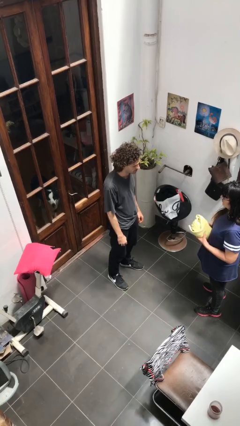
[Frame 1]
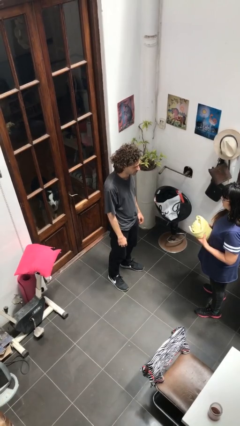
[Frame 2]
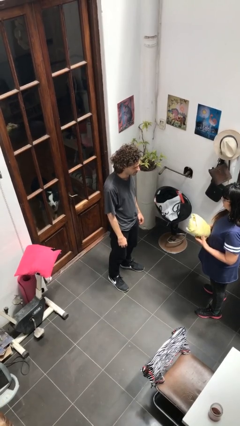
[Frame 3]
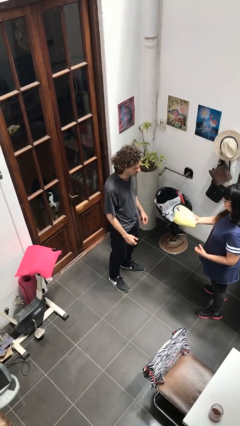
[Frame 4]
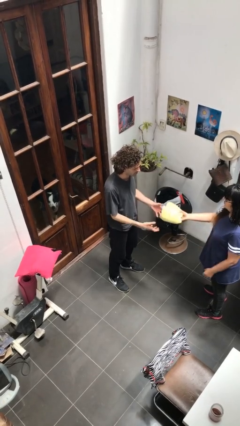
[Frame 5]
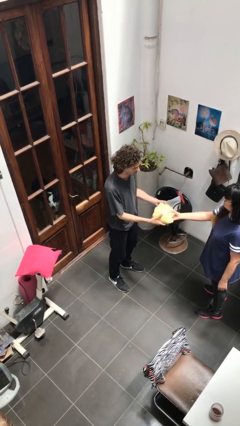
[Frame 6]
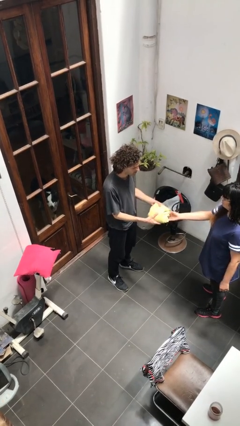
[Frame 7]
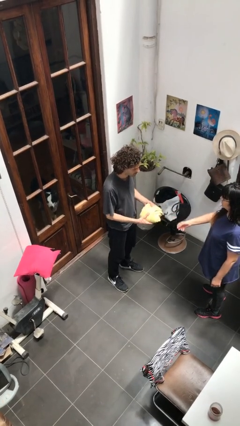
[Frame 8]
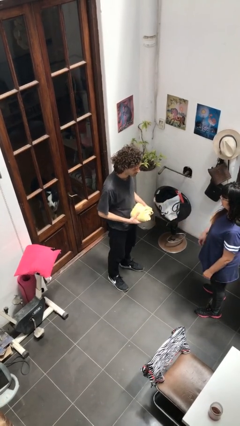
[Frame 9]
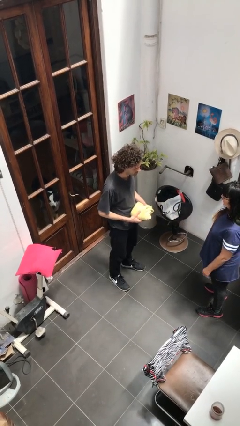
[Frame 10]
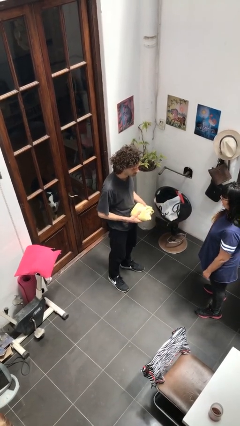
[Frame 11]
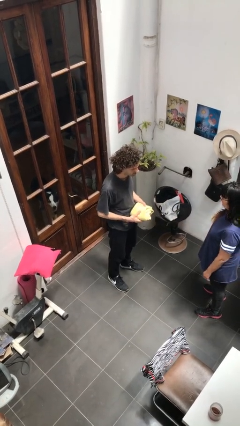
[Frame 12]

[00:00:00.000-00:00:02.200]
person transfers object to person

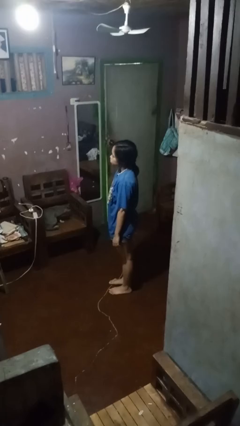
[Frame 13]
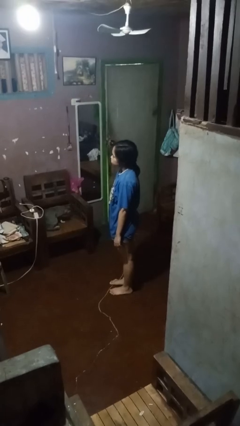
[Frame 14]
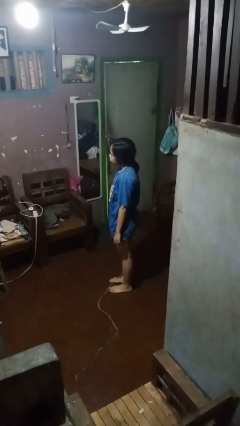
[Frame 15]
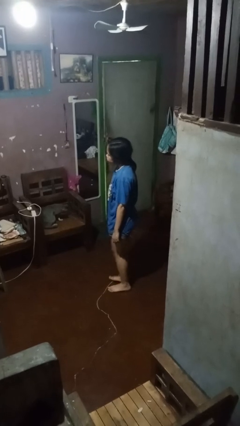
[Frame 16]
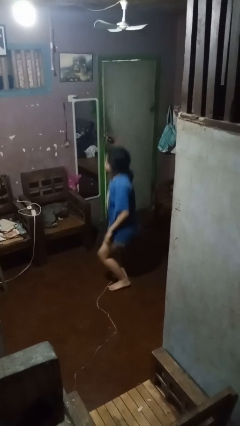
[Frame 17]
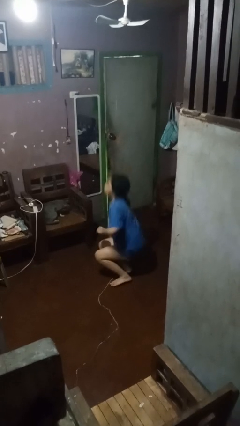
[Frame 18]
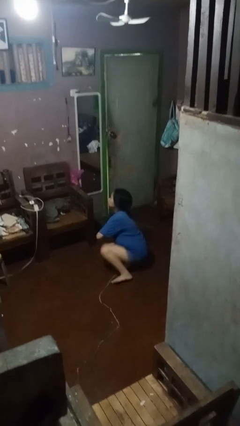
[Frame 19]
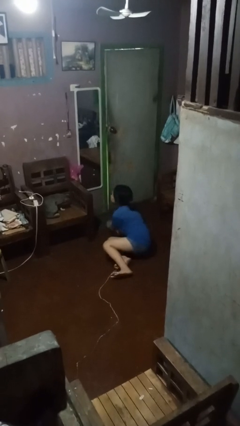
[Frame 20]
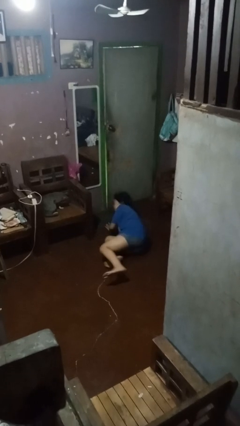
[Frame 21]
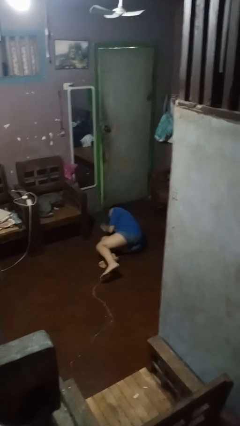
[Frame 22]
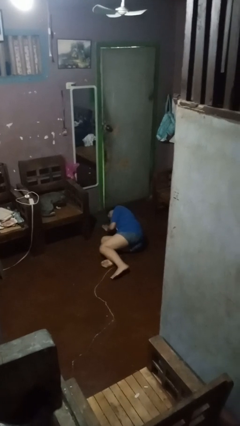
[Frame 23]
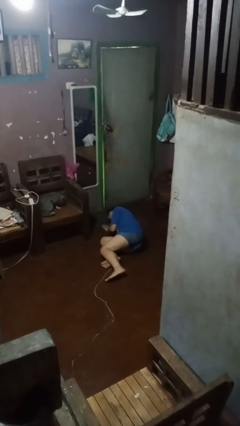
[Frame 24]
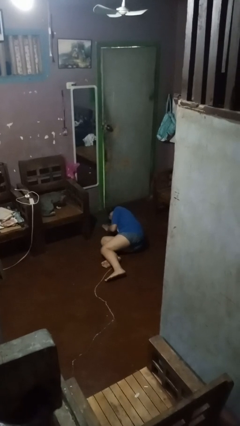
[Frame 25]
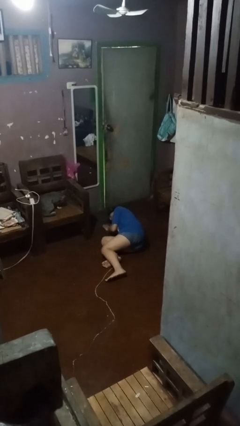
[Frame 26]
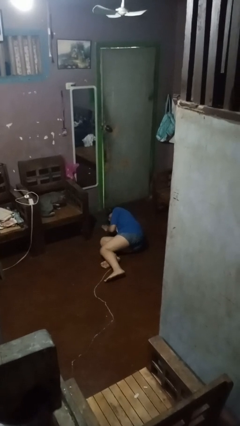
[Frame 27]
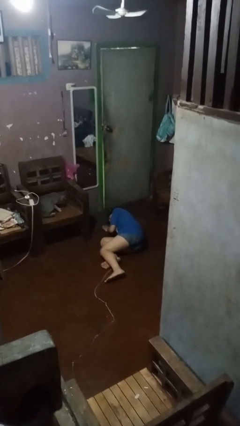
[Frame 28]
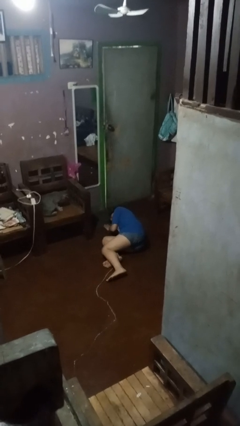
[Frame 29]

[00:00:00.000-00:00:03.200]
person falls while standing

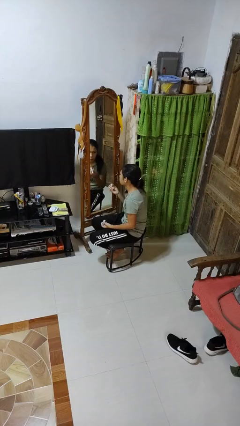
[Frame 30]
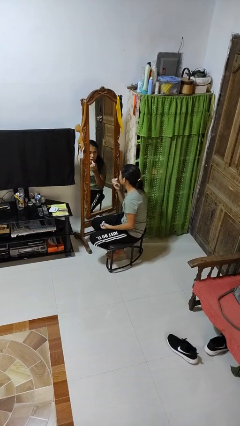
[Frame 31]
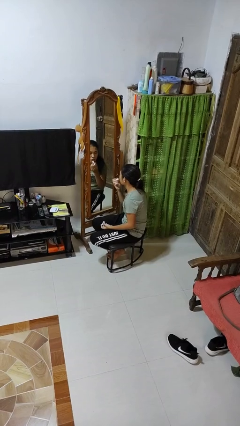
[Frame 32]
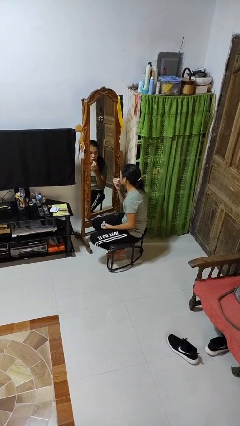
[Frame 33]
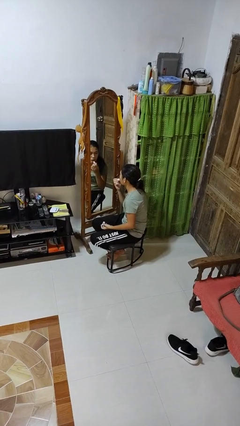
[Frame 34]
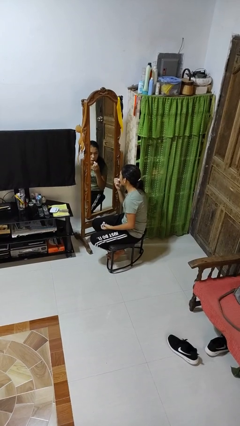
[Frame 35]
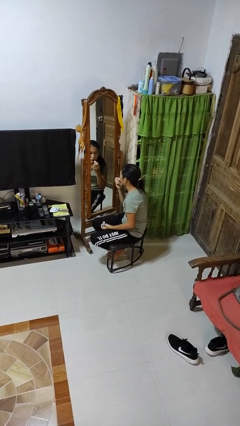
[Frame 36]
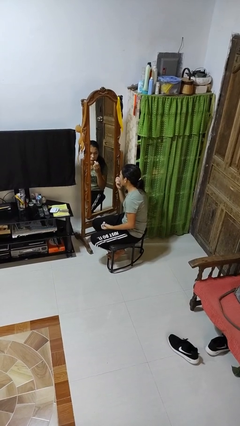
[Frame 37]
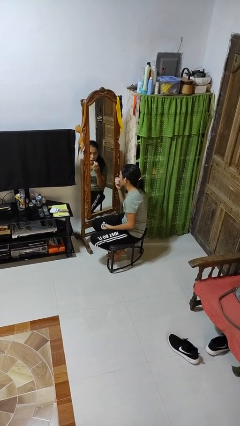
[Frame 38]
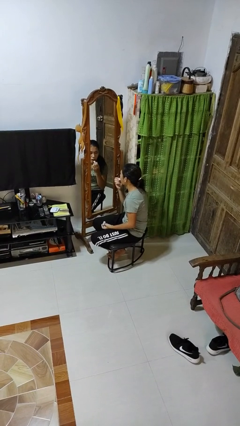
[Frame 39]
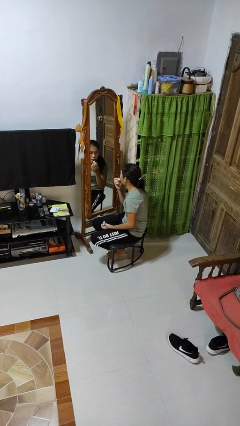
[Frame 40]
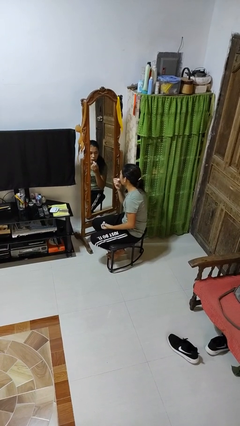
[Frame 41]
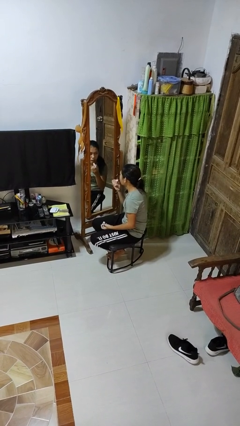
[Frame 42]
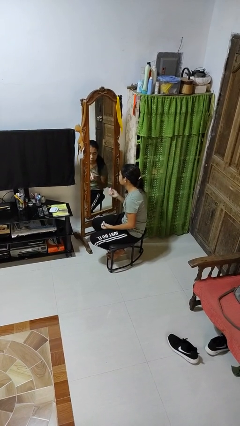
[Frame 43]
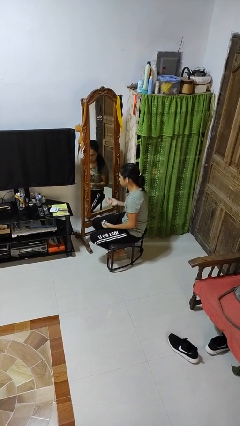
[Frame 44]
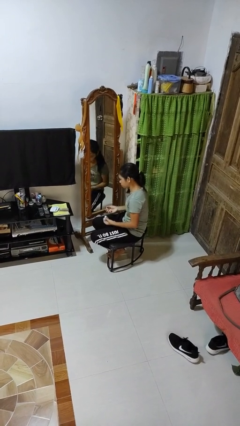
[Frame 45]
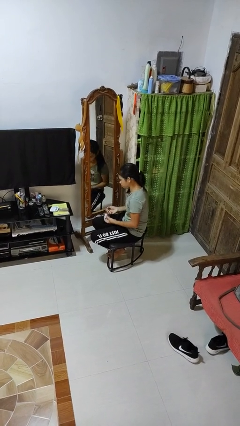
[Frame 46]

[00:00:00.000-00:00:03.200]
person applies lip makeup

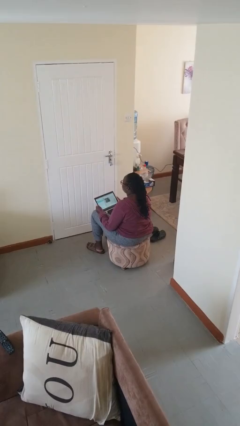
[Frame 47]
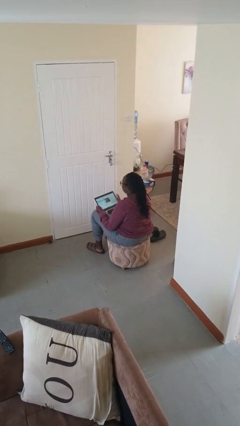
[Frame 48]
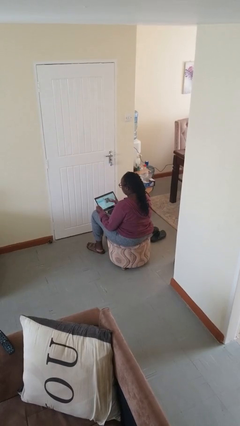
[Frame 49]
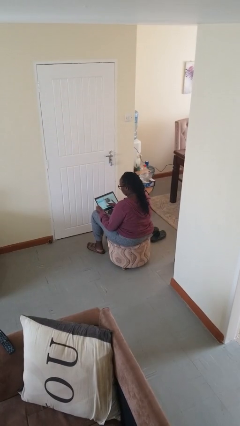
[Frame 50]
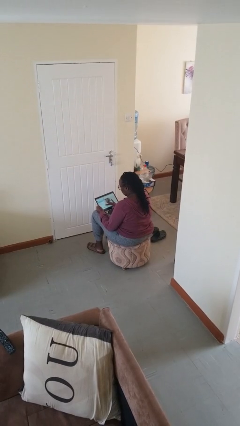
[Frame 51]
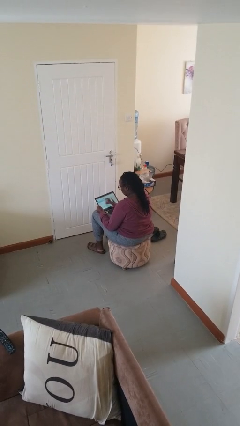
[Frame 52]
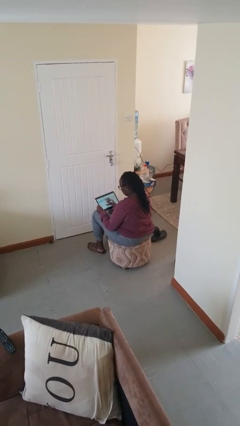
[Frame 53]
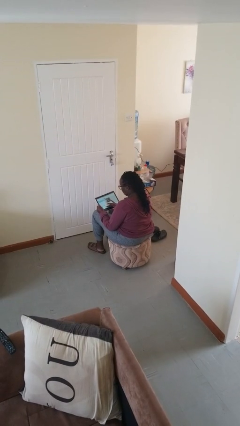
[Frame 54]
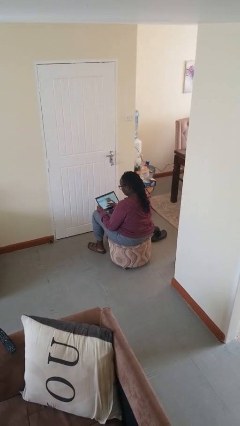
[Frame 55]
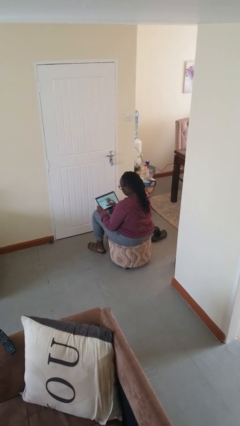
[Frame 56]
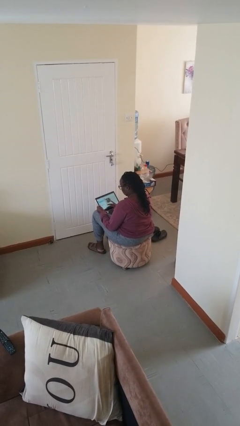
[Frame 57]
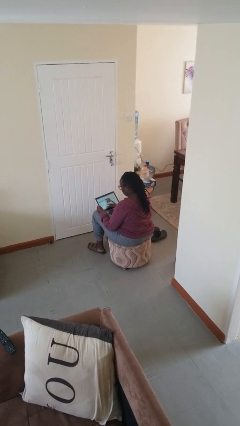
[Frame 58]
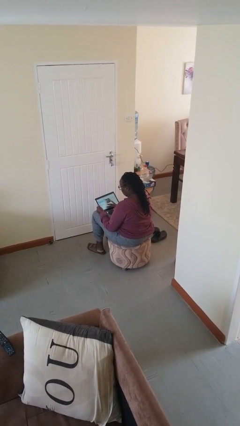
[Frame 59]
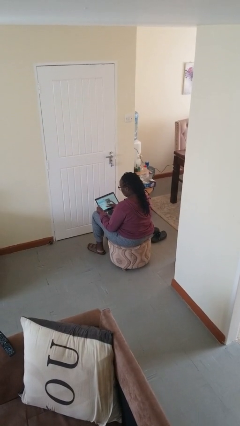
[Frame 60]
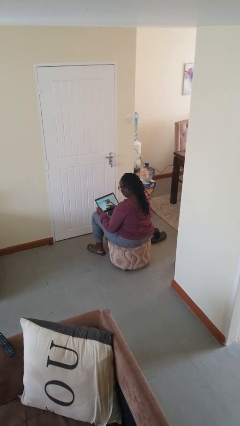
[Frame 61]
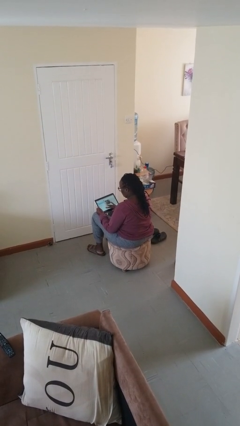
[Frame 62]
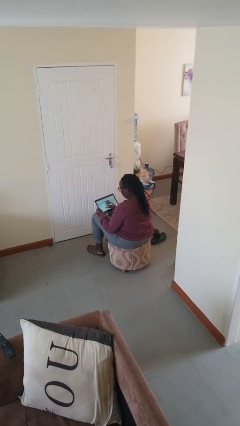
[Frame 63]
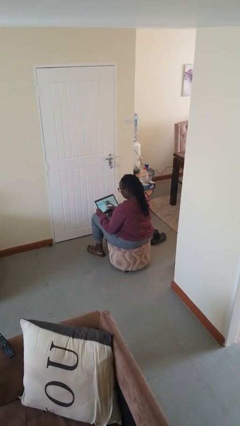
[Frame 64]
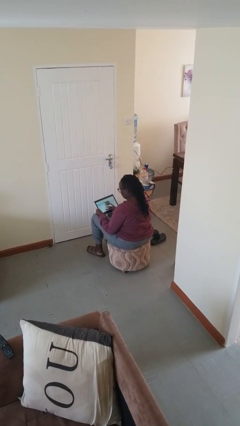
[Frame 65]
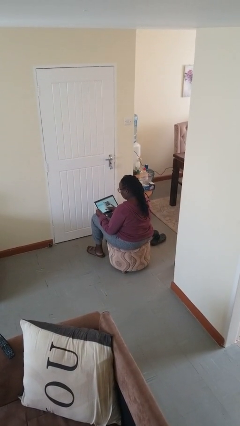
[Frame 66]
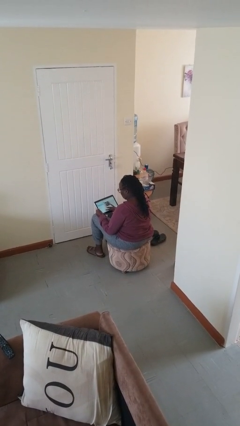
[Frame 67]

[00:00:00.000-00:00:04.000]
person interacts with tablet

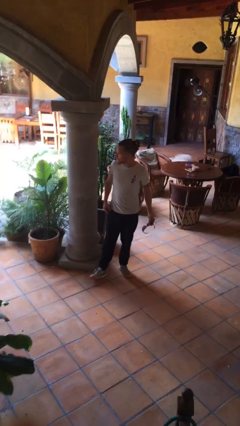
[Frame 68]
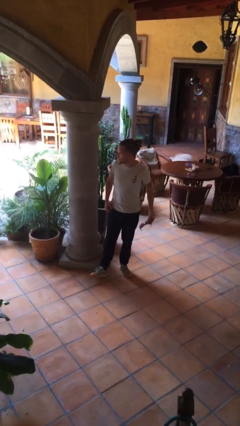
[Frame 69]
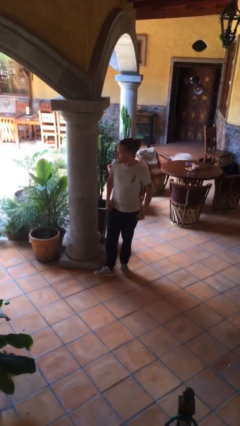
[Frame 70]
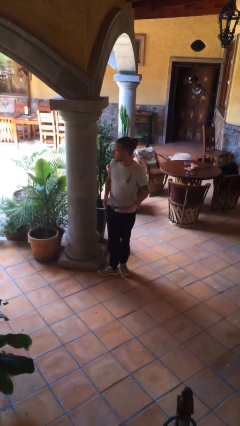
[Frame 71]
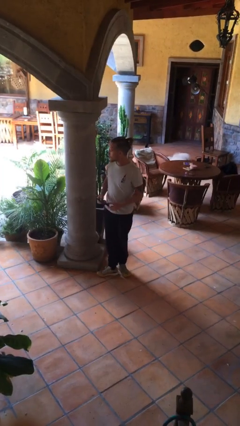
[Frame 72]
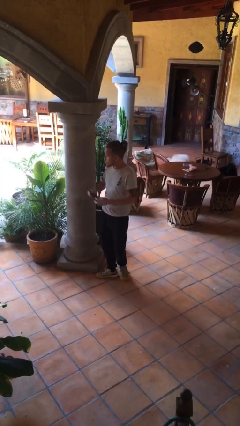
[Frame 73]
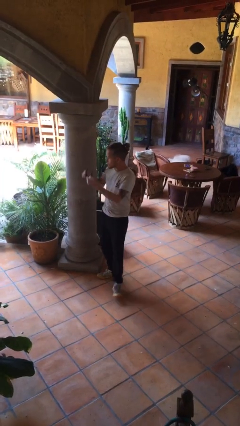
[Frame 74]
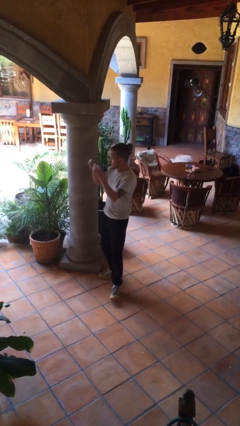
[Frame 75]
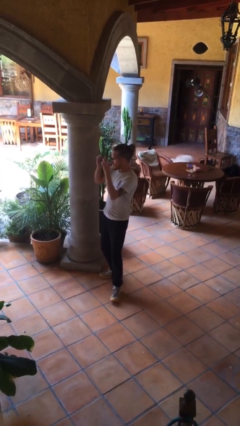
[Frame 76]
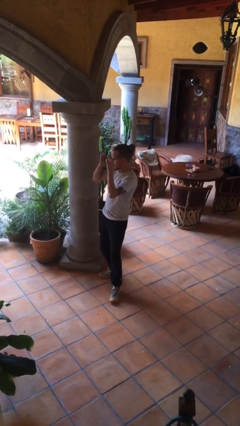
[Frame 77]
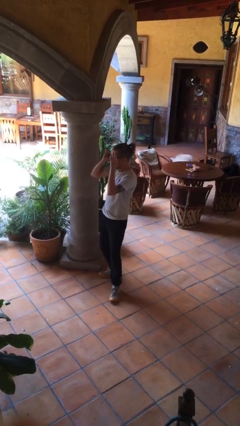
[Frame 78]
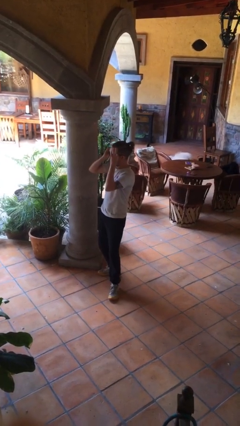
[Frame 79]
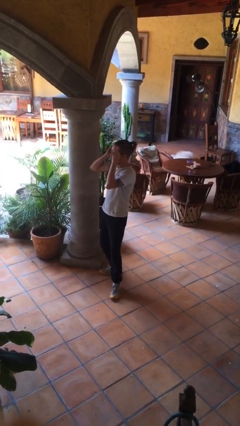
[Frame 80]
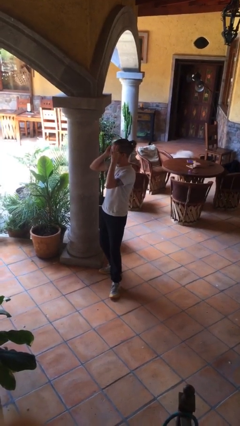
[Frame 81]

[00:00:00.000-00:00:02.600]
person puts on sunglasses

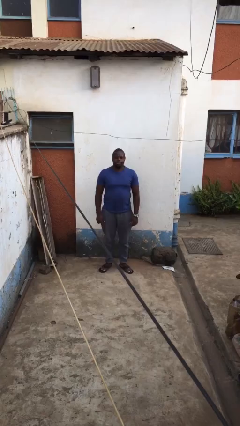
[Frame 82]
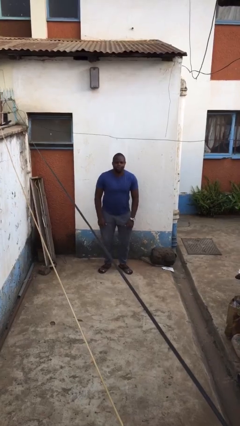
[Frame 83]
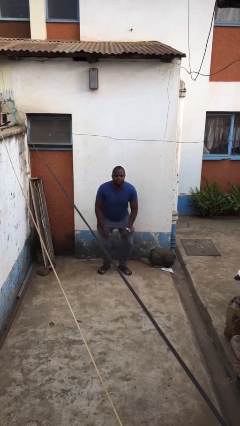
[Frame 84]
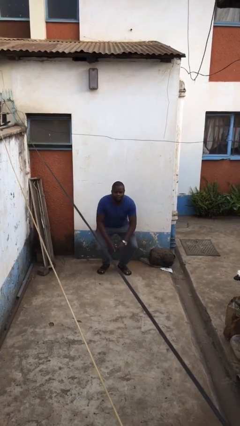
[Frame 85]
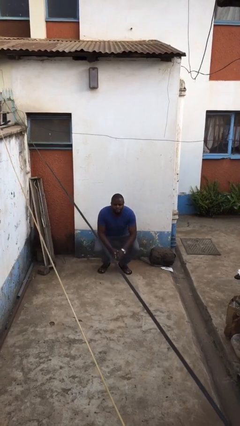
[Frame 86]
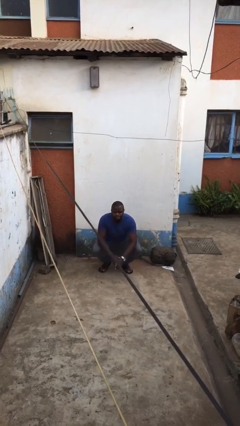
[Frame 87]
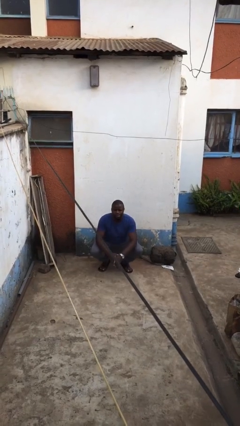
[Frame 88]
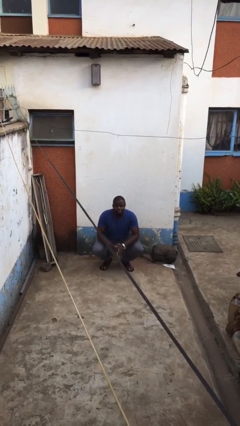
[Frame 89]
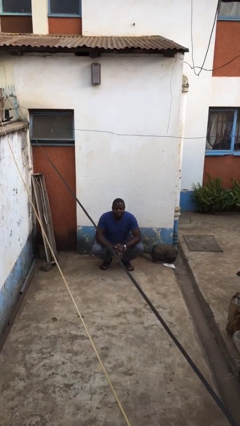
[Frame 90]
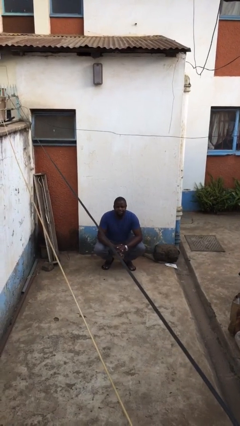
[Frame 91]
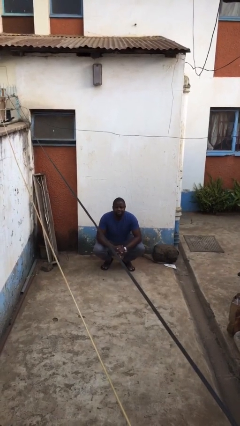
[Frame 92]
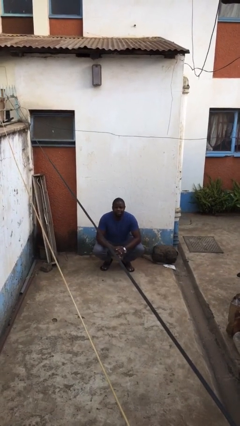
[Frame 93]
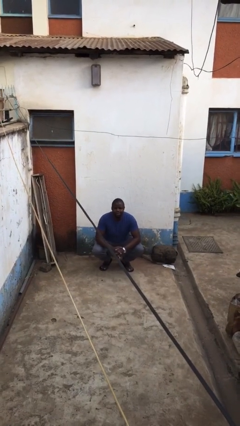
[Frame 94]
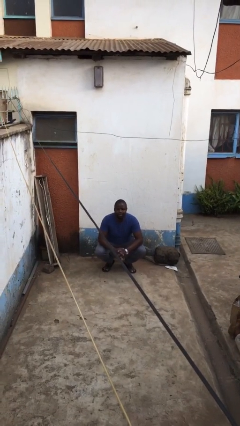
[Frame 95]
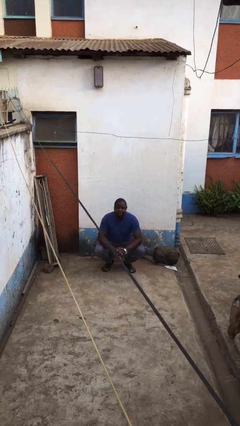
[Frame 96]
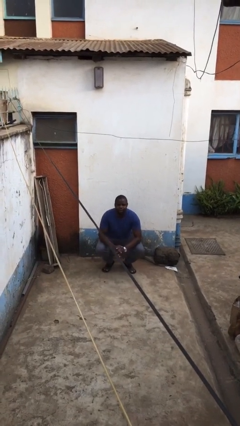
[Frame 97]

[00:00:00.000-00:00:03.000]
person squats
